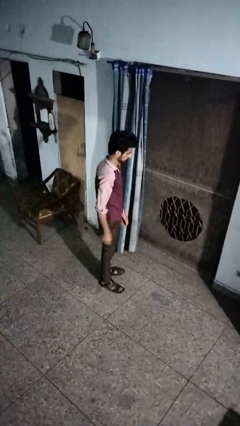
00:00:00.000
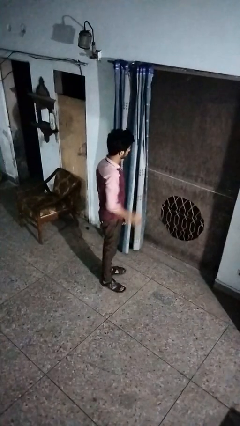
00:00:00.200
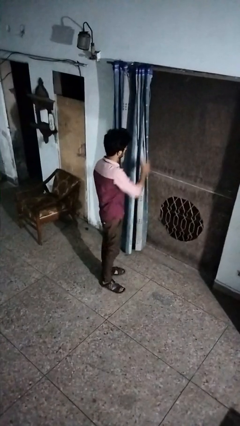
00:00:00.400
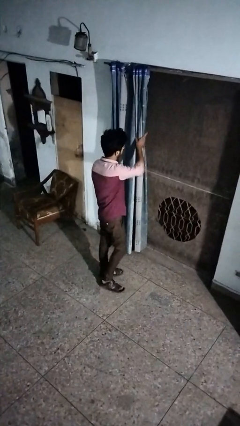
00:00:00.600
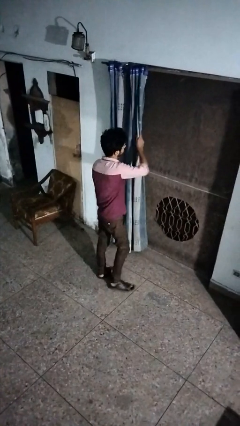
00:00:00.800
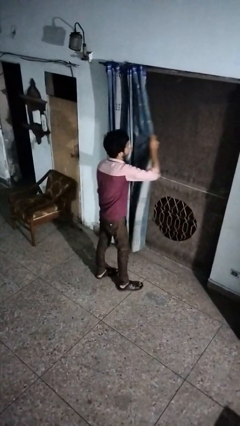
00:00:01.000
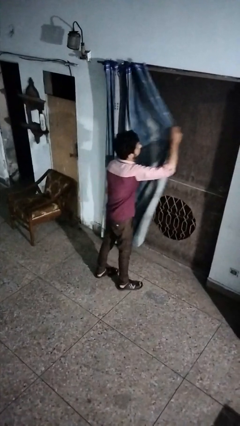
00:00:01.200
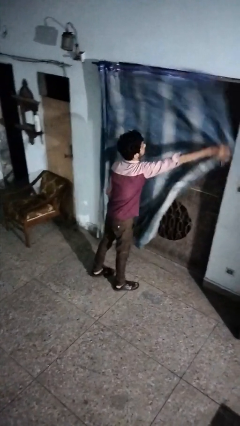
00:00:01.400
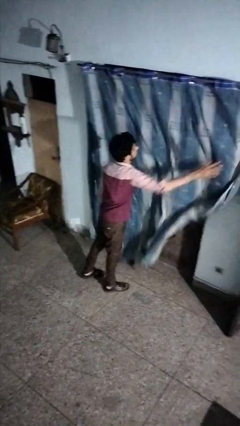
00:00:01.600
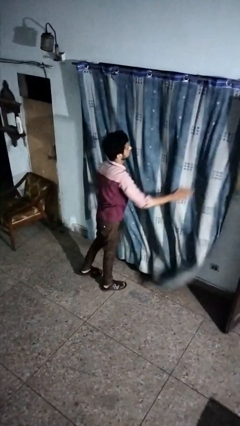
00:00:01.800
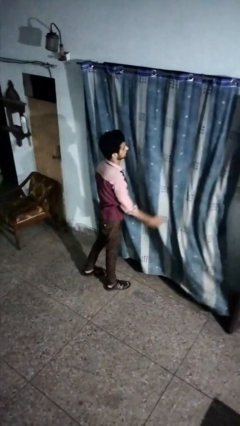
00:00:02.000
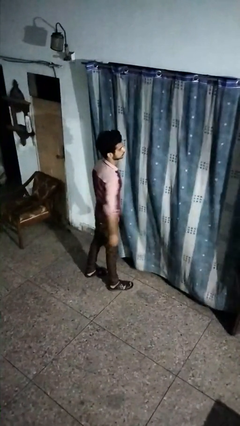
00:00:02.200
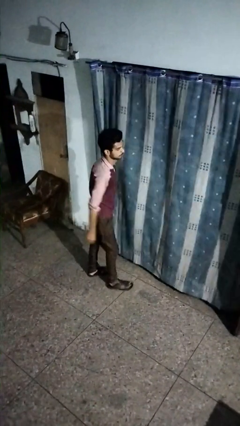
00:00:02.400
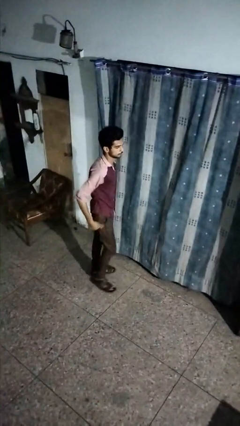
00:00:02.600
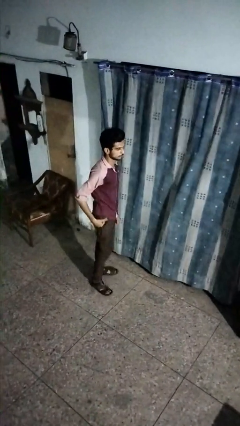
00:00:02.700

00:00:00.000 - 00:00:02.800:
person closes curtains

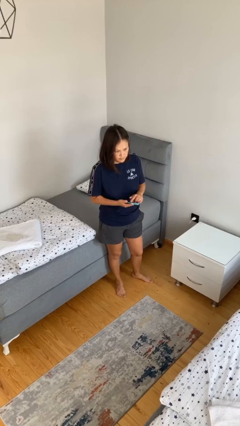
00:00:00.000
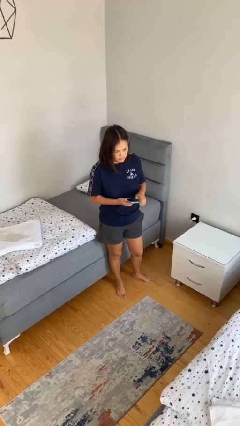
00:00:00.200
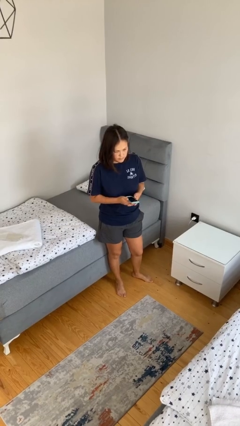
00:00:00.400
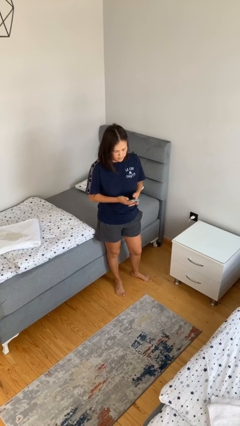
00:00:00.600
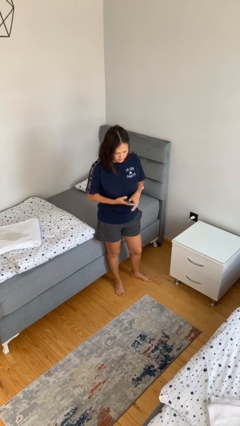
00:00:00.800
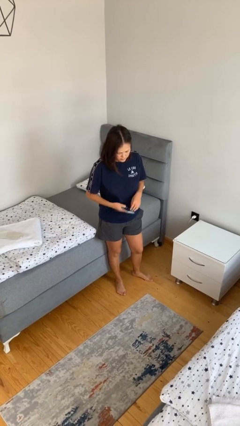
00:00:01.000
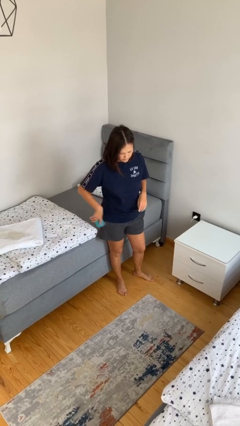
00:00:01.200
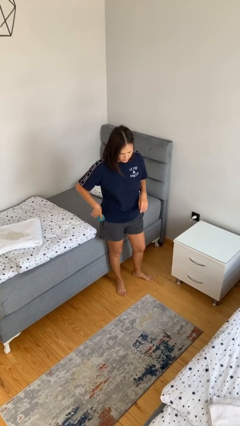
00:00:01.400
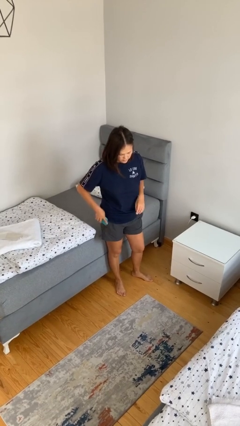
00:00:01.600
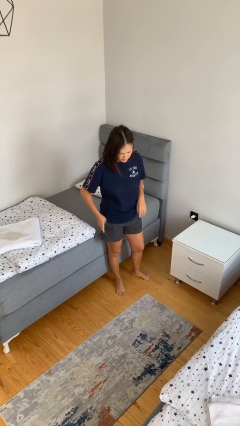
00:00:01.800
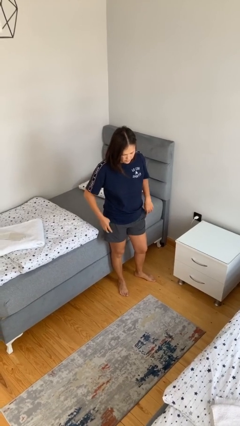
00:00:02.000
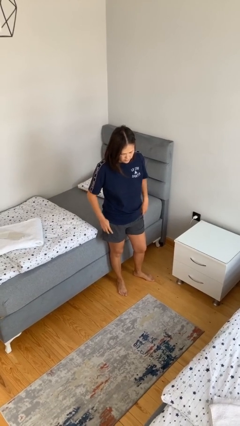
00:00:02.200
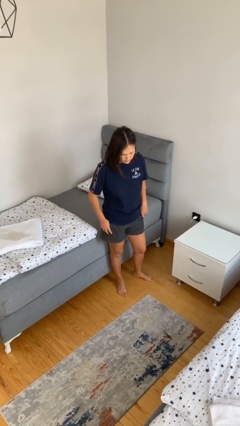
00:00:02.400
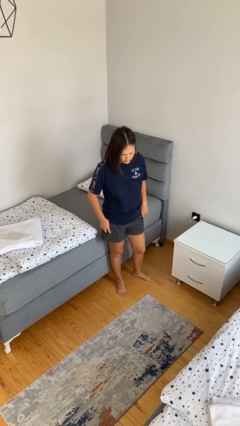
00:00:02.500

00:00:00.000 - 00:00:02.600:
person takes phone from pocket

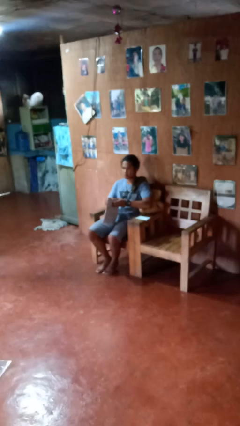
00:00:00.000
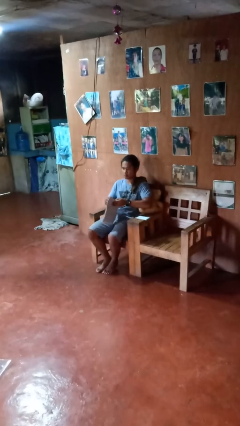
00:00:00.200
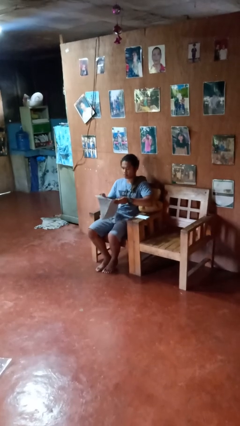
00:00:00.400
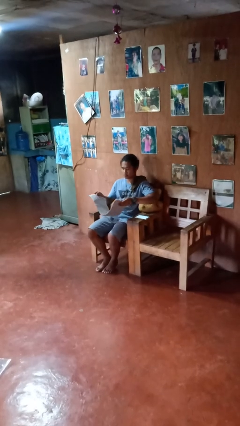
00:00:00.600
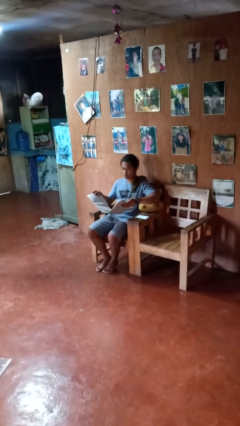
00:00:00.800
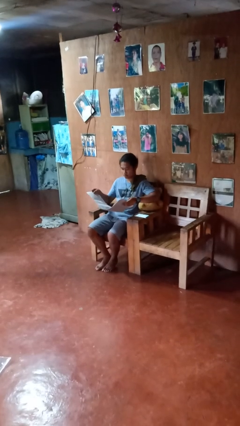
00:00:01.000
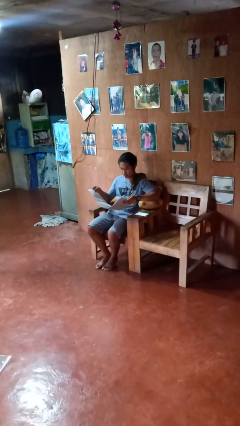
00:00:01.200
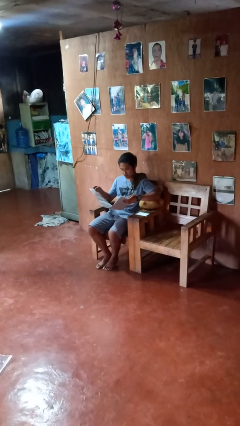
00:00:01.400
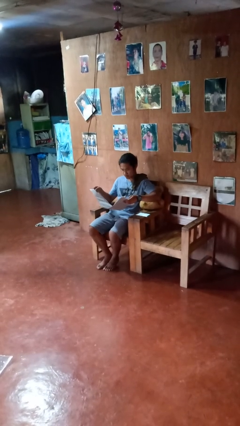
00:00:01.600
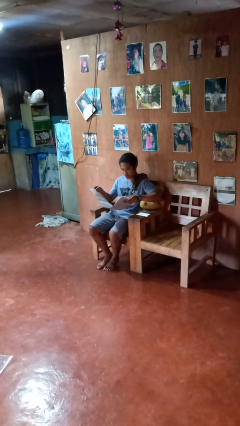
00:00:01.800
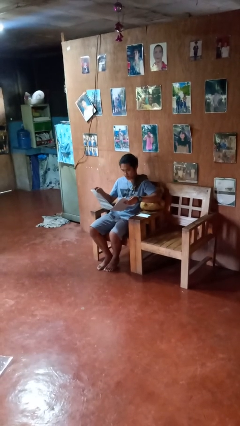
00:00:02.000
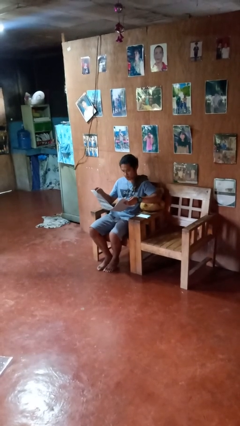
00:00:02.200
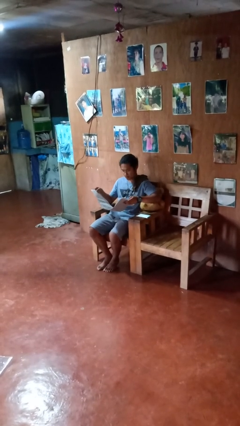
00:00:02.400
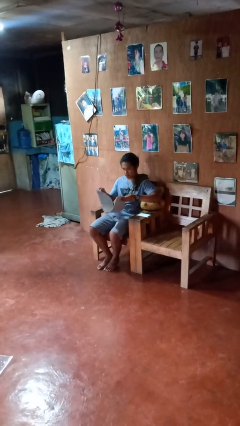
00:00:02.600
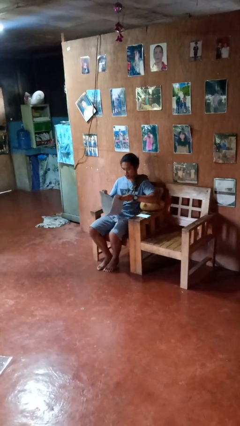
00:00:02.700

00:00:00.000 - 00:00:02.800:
person reads newspaper

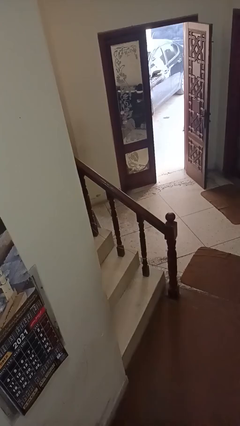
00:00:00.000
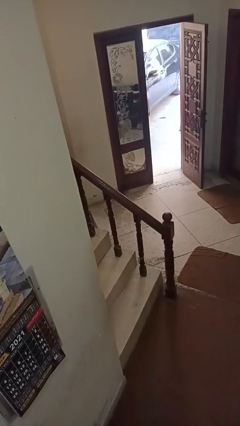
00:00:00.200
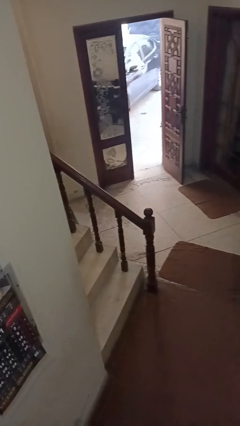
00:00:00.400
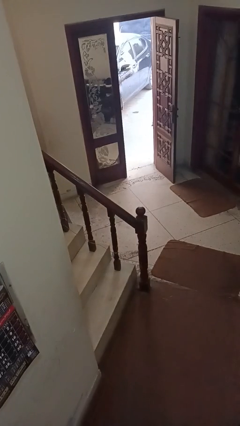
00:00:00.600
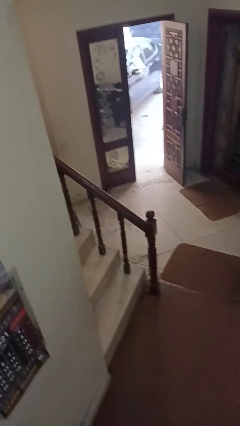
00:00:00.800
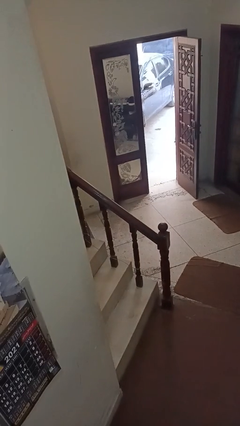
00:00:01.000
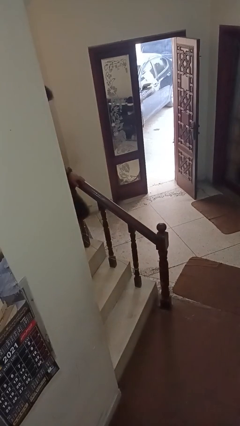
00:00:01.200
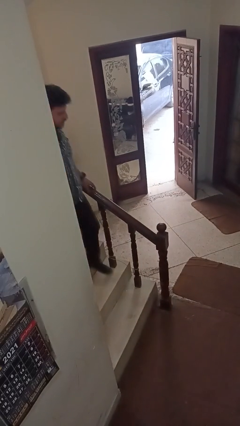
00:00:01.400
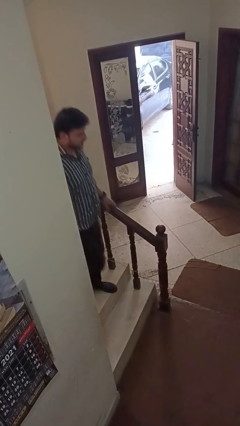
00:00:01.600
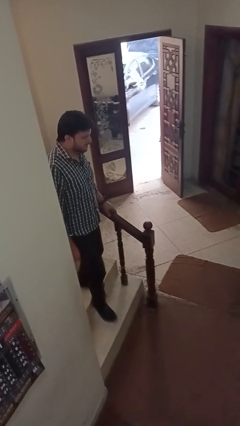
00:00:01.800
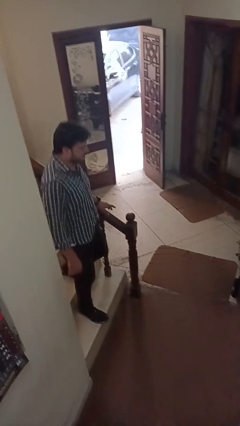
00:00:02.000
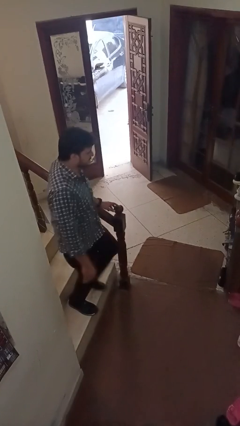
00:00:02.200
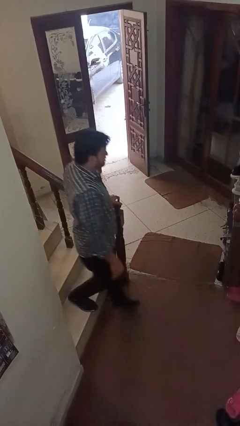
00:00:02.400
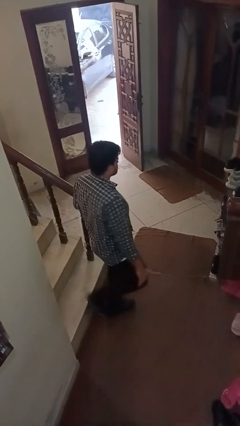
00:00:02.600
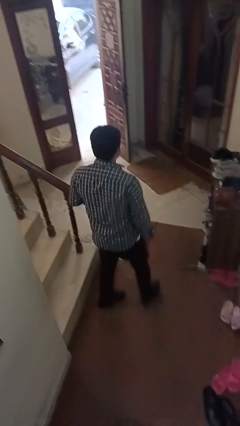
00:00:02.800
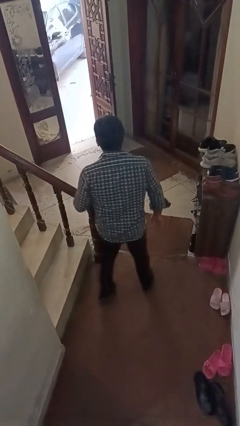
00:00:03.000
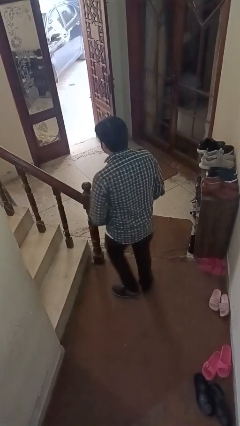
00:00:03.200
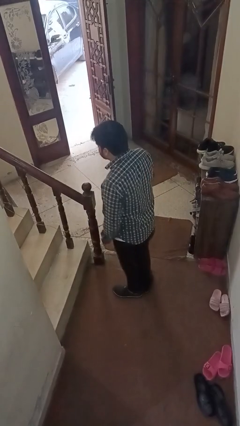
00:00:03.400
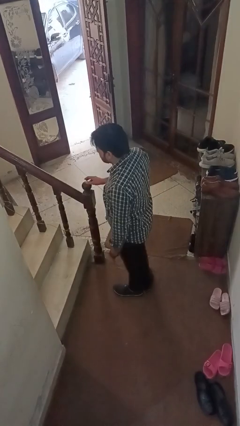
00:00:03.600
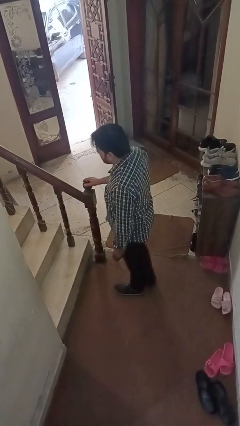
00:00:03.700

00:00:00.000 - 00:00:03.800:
person climbs down stairs

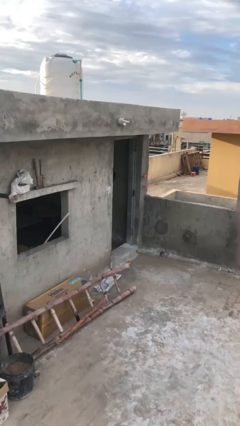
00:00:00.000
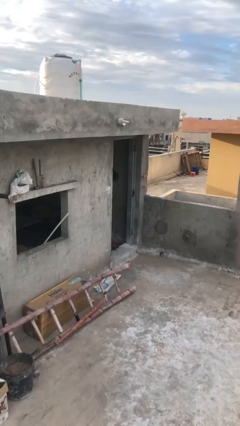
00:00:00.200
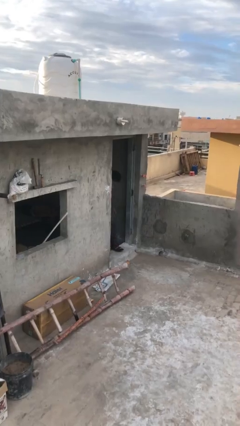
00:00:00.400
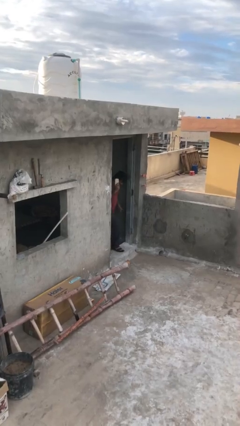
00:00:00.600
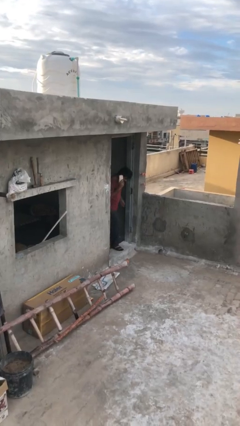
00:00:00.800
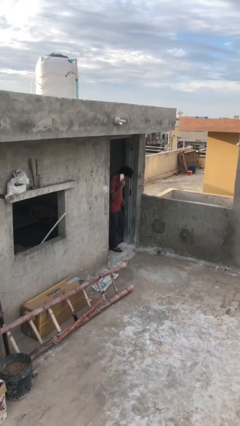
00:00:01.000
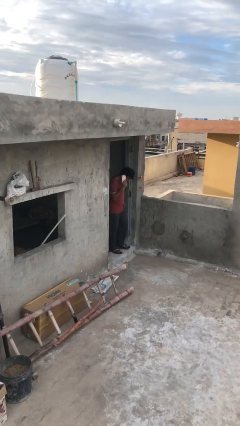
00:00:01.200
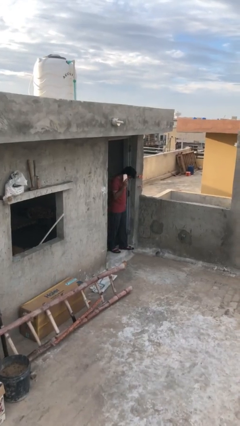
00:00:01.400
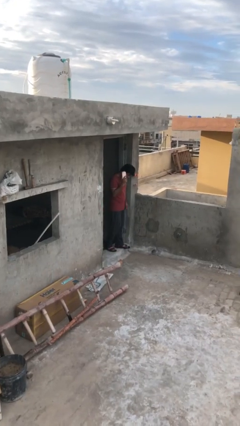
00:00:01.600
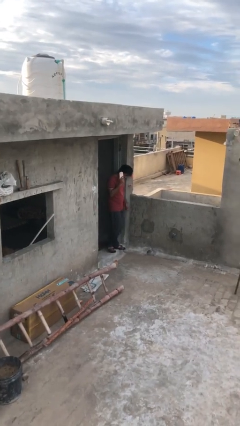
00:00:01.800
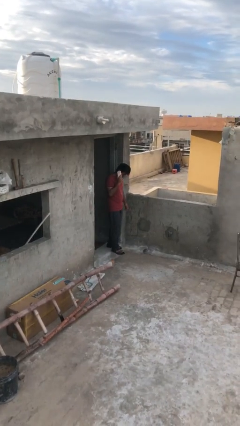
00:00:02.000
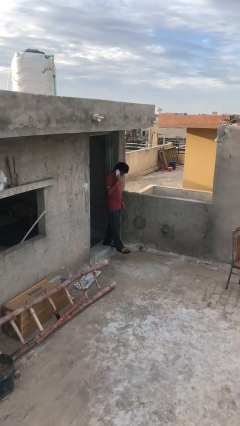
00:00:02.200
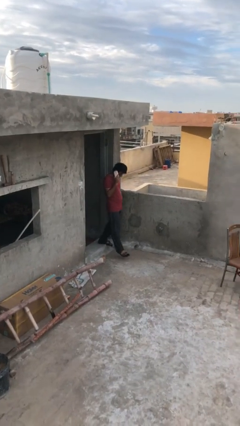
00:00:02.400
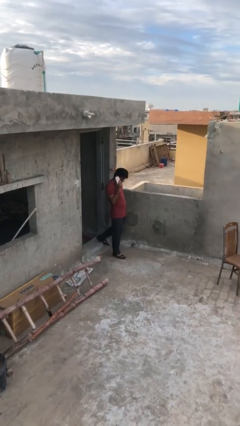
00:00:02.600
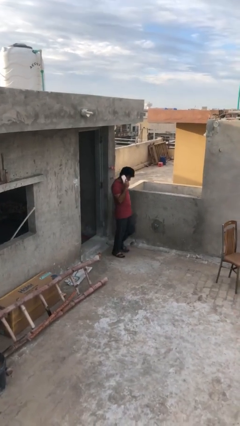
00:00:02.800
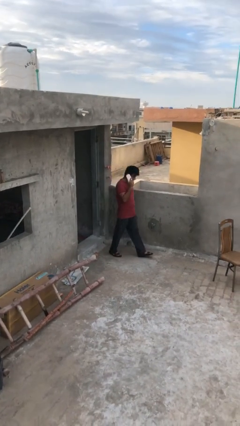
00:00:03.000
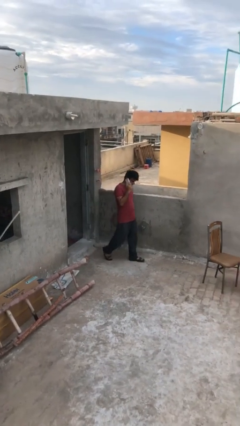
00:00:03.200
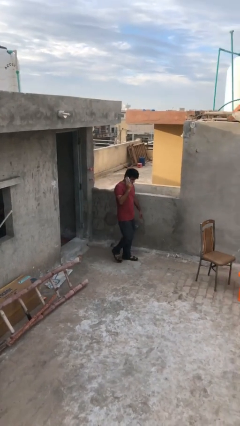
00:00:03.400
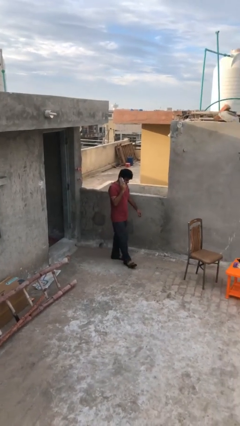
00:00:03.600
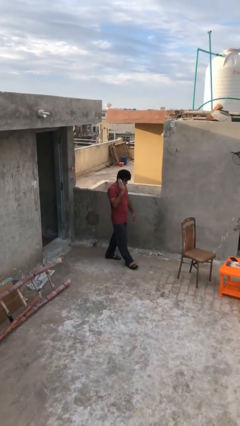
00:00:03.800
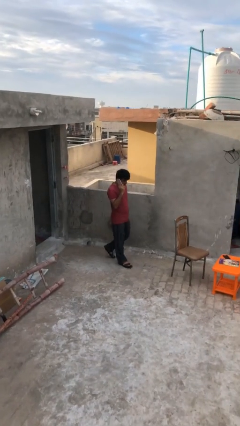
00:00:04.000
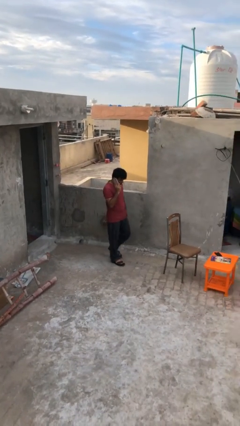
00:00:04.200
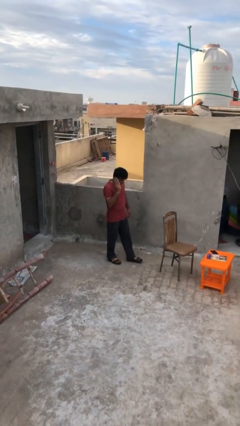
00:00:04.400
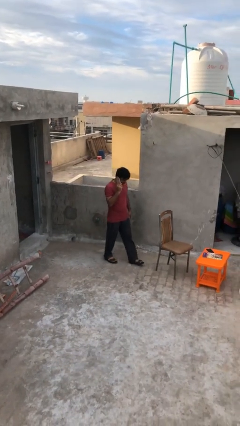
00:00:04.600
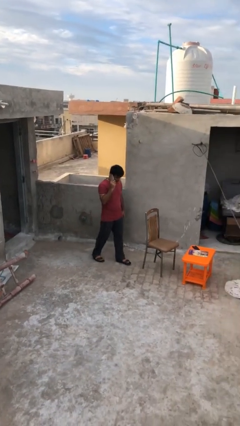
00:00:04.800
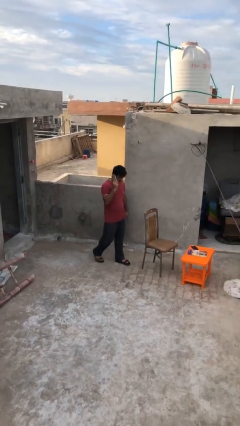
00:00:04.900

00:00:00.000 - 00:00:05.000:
person enters scene through structure

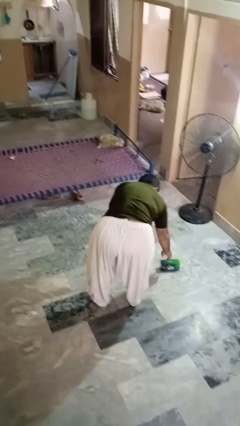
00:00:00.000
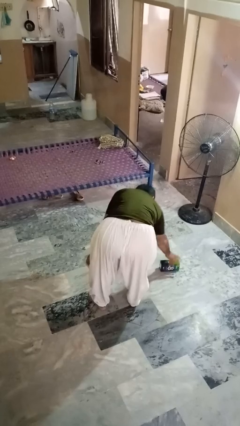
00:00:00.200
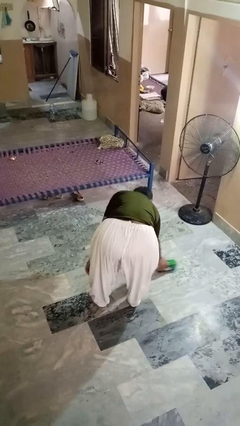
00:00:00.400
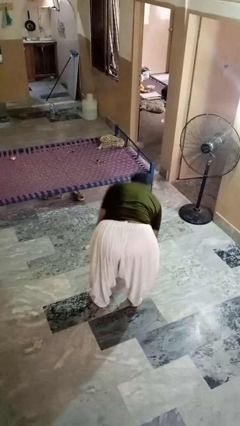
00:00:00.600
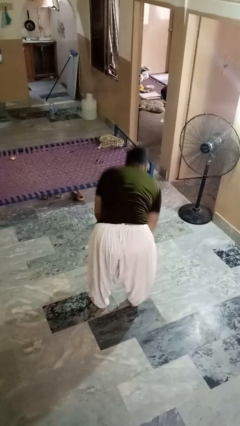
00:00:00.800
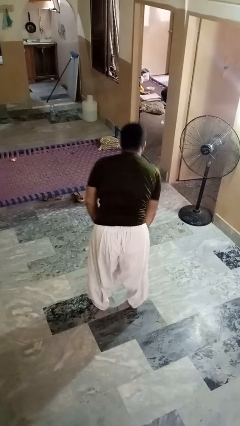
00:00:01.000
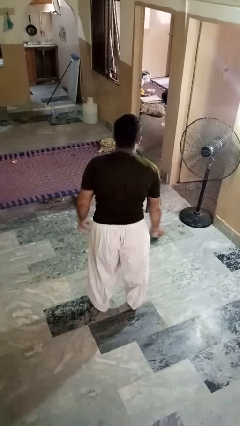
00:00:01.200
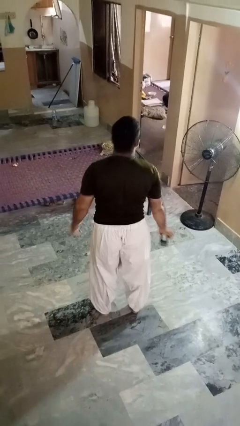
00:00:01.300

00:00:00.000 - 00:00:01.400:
person picks up object from floor
